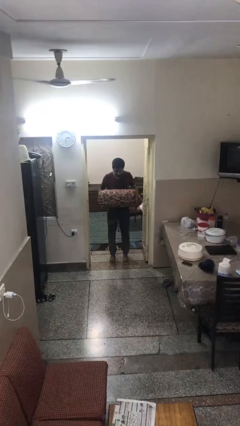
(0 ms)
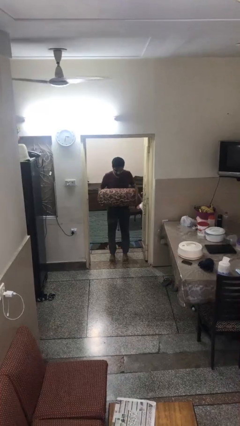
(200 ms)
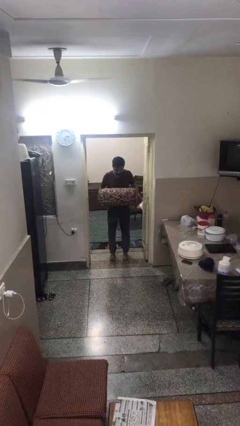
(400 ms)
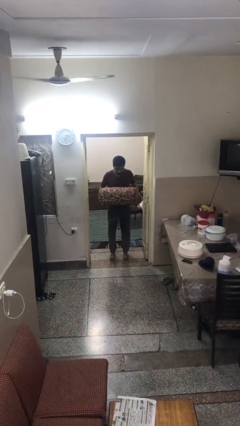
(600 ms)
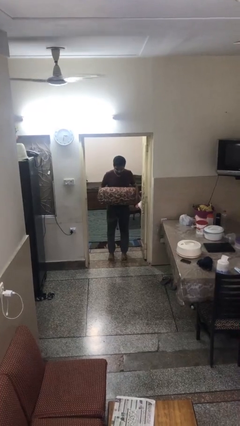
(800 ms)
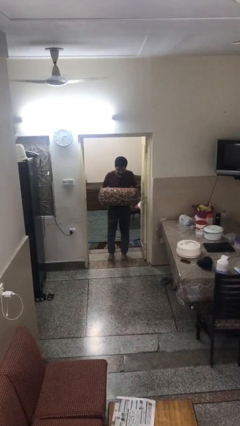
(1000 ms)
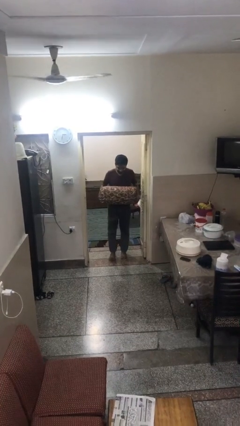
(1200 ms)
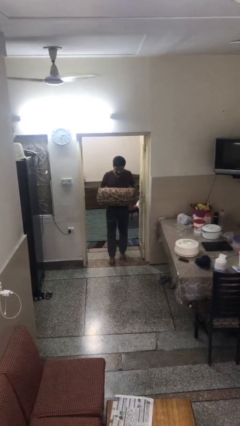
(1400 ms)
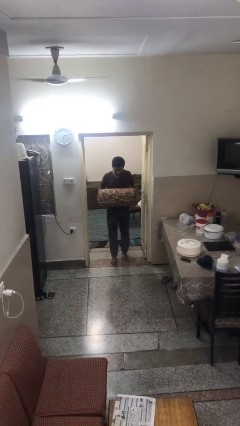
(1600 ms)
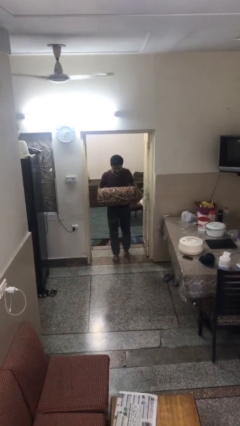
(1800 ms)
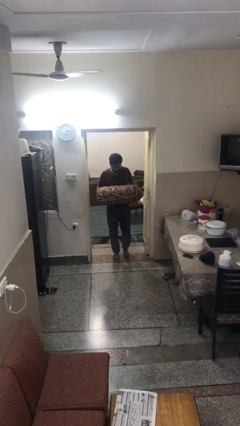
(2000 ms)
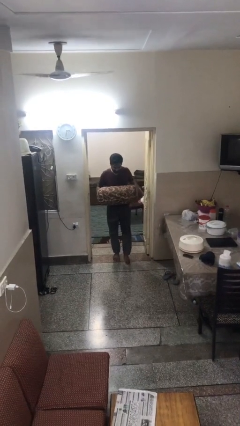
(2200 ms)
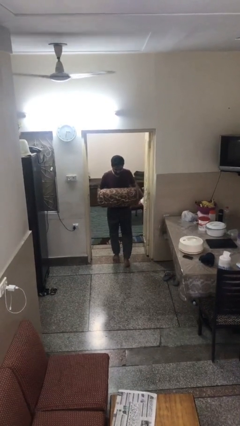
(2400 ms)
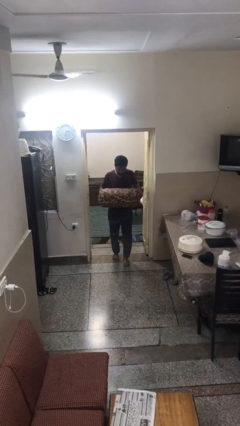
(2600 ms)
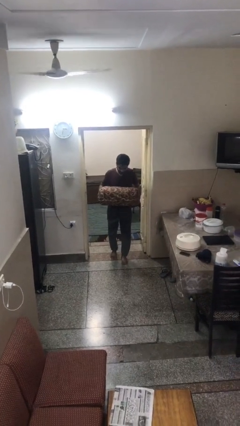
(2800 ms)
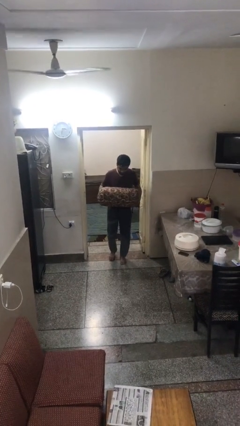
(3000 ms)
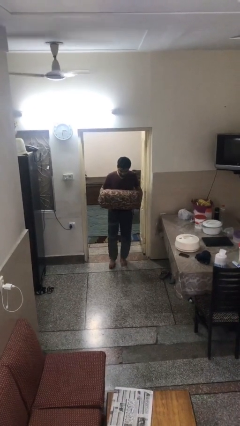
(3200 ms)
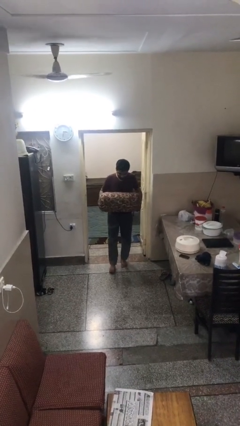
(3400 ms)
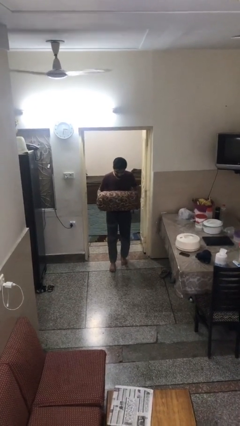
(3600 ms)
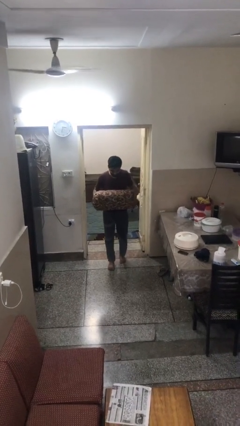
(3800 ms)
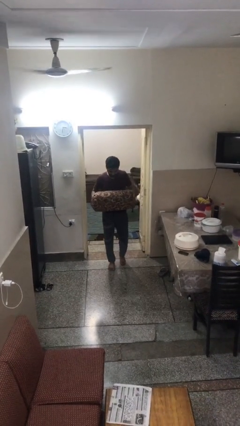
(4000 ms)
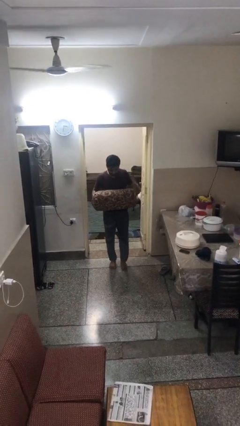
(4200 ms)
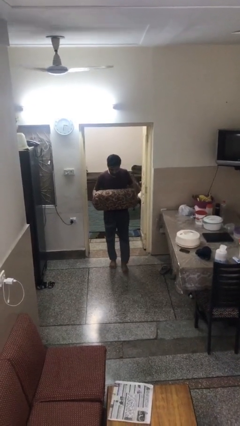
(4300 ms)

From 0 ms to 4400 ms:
person carries heavy object

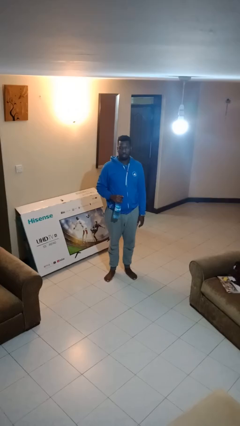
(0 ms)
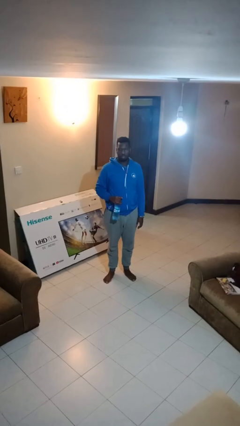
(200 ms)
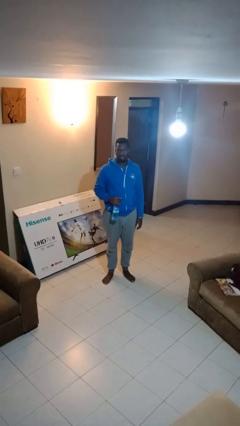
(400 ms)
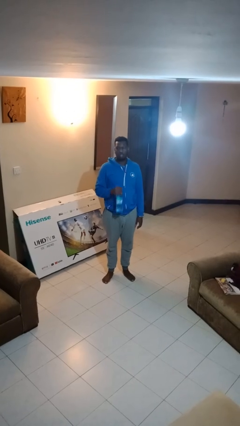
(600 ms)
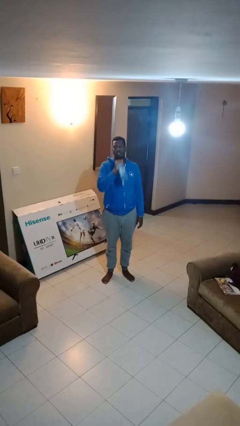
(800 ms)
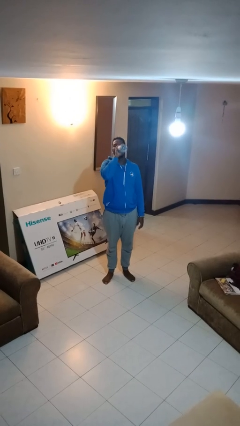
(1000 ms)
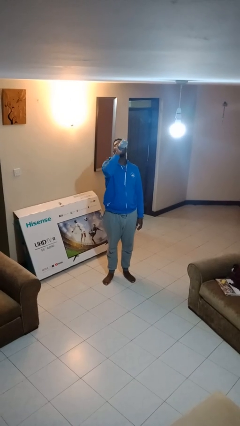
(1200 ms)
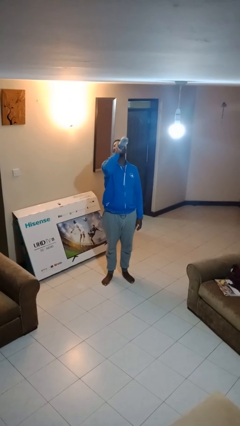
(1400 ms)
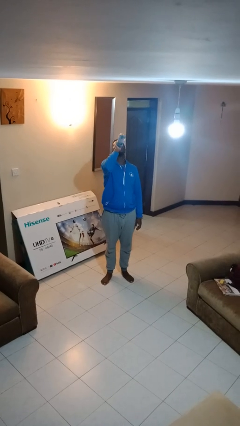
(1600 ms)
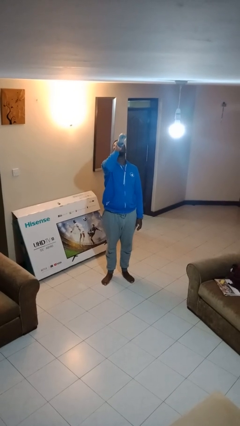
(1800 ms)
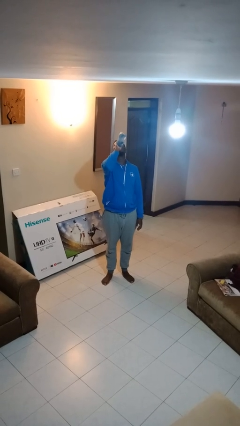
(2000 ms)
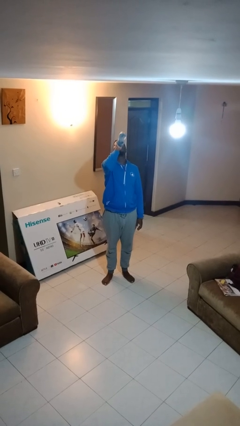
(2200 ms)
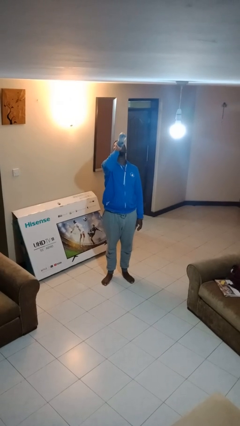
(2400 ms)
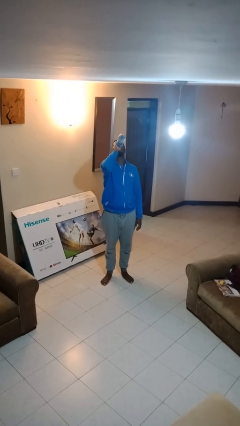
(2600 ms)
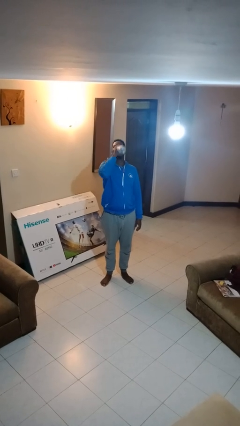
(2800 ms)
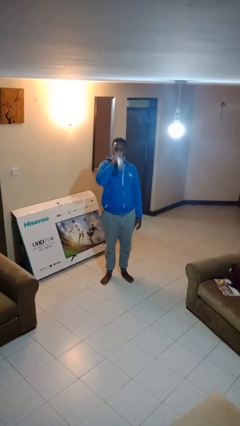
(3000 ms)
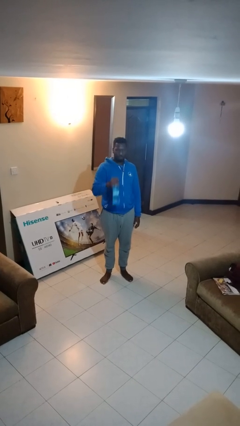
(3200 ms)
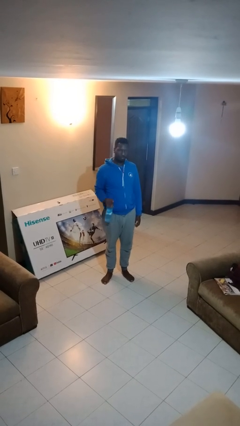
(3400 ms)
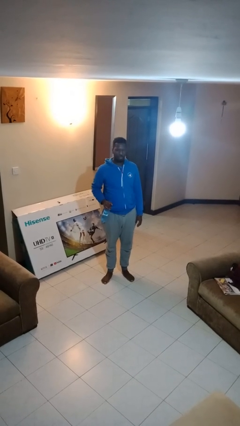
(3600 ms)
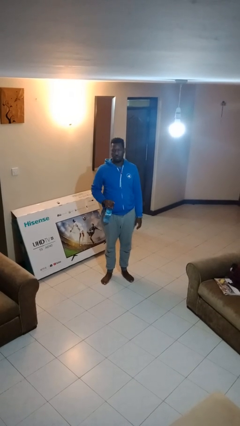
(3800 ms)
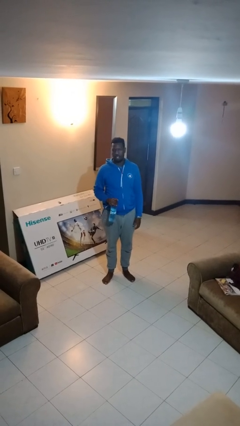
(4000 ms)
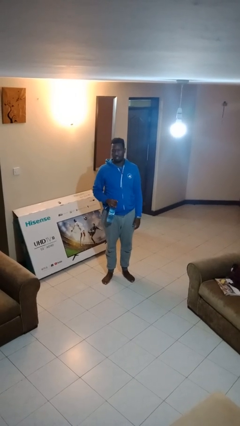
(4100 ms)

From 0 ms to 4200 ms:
person drinks from bottle

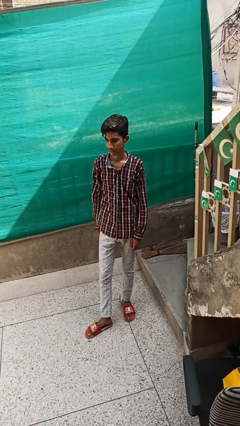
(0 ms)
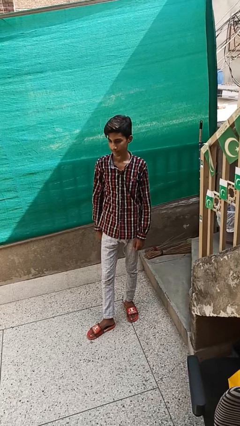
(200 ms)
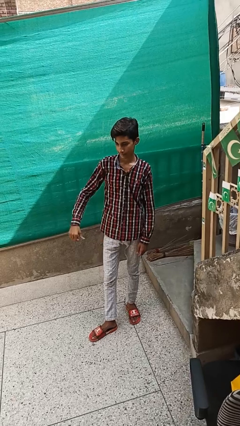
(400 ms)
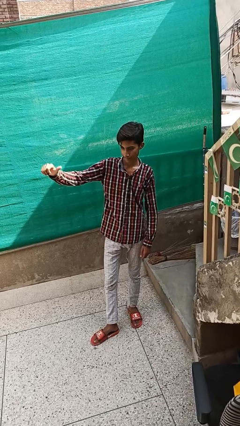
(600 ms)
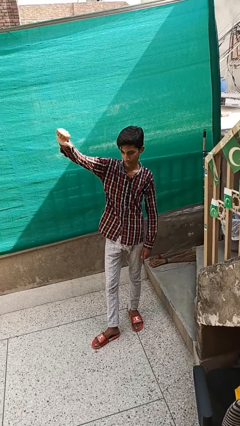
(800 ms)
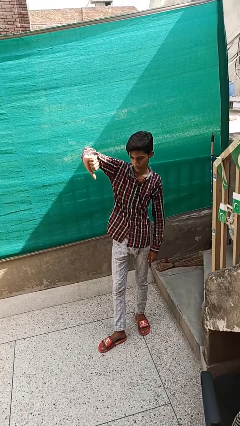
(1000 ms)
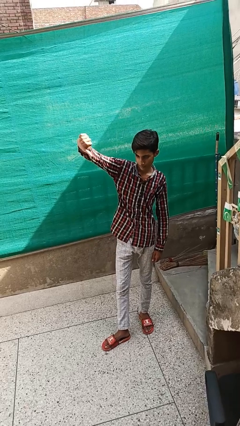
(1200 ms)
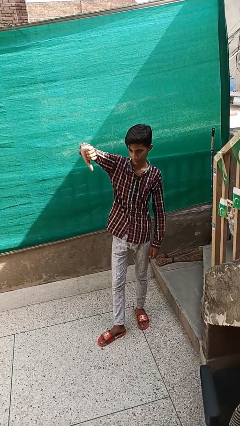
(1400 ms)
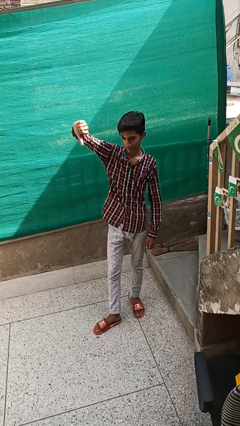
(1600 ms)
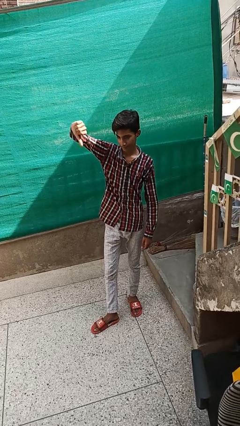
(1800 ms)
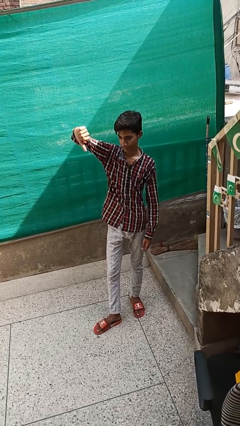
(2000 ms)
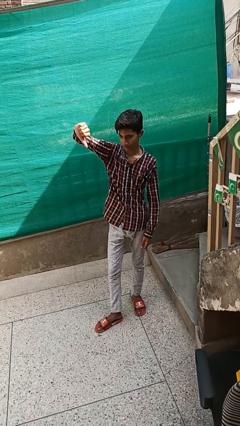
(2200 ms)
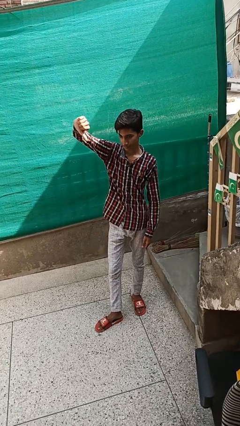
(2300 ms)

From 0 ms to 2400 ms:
person gestures thumbs down

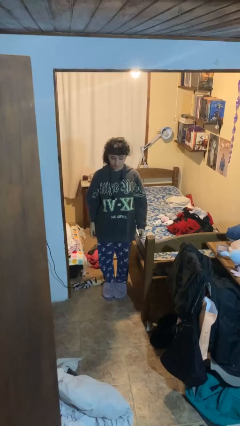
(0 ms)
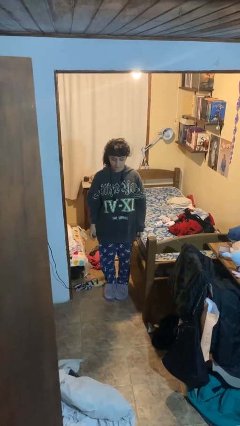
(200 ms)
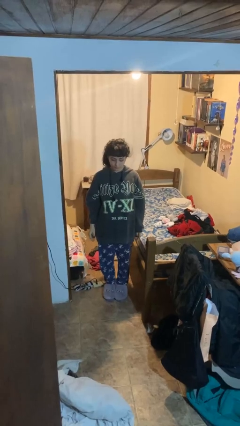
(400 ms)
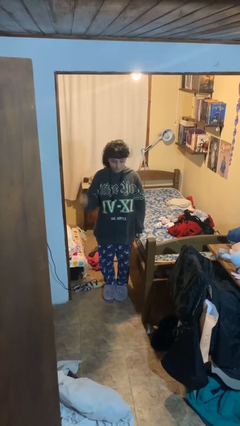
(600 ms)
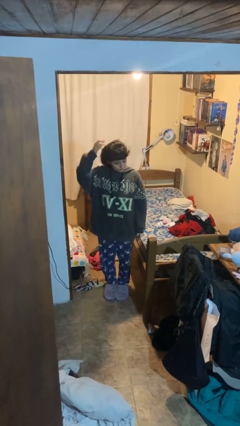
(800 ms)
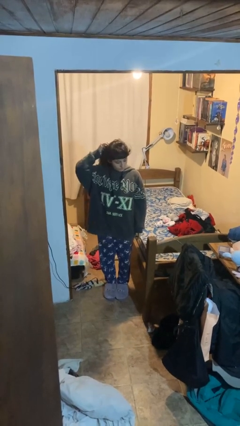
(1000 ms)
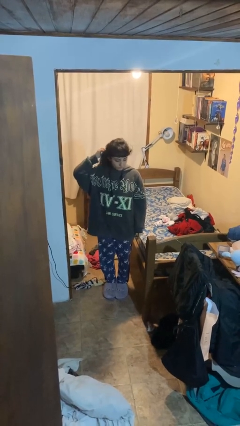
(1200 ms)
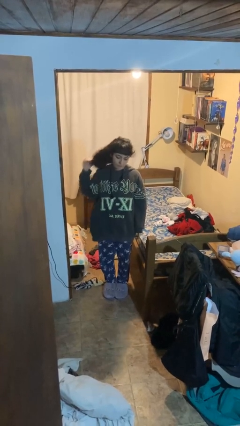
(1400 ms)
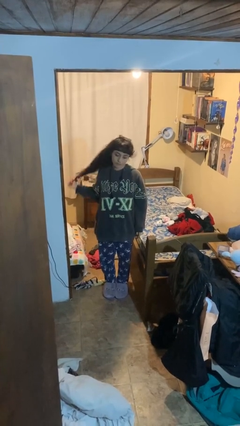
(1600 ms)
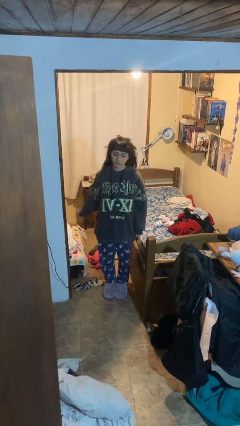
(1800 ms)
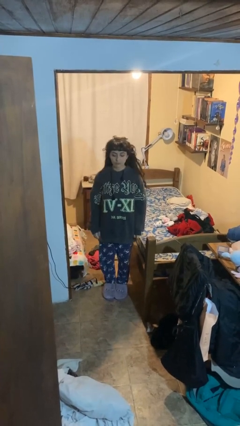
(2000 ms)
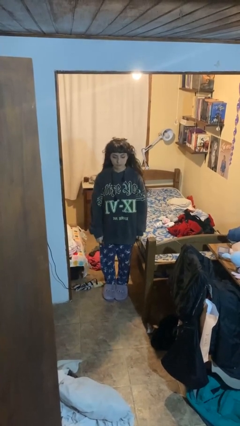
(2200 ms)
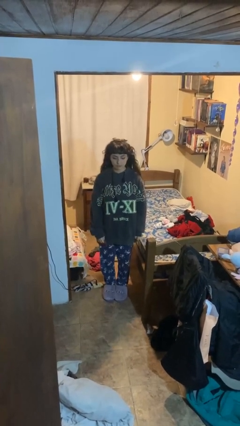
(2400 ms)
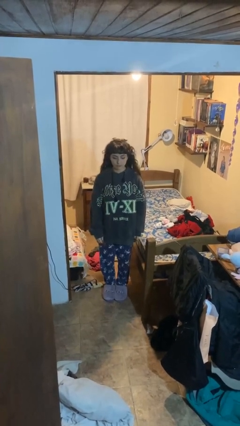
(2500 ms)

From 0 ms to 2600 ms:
person takes off hairtie

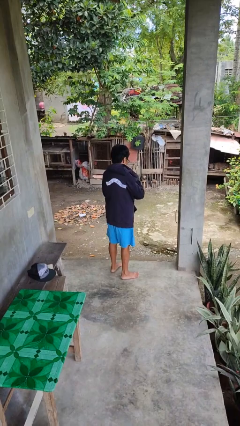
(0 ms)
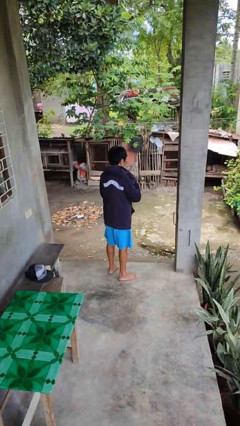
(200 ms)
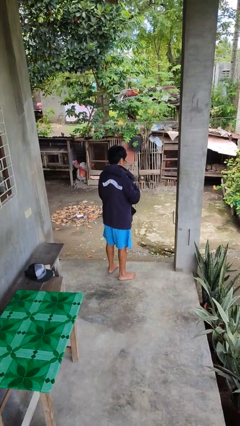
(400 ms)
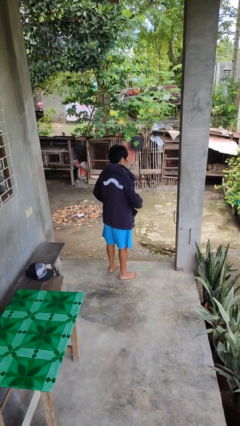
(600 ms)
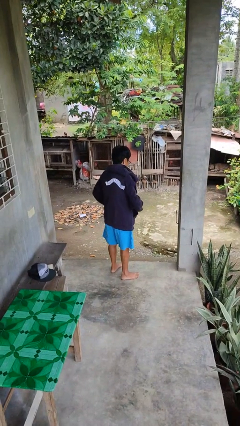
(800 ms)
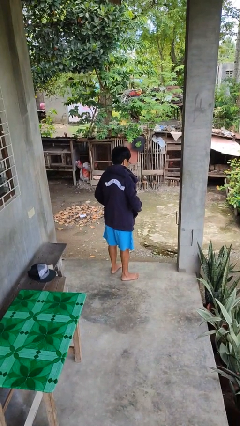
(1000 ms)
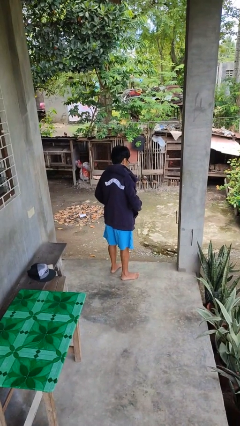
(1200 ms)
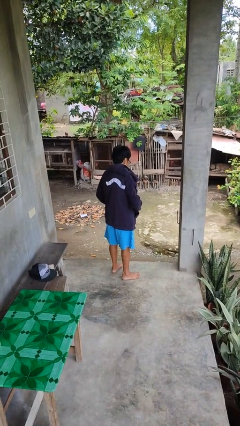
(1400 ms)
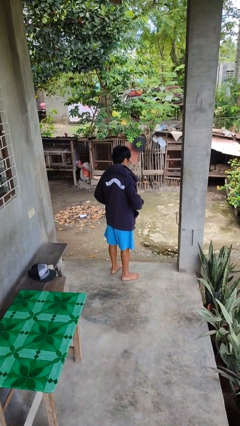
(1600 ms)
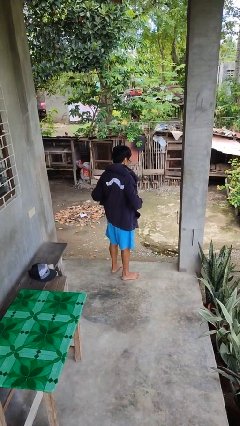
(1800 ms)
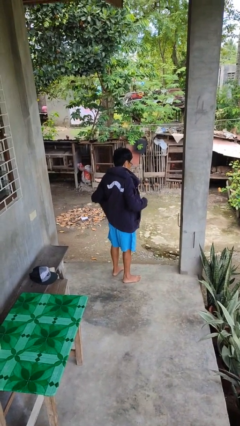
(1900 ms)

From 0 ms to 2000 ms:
person unzips jacket

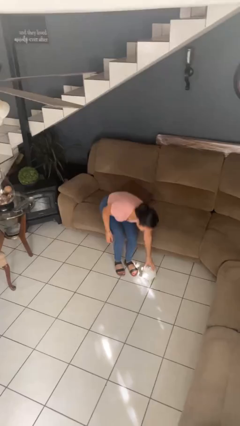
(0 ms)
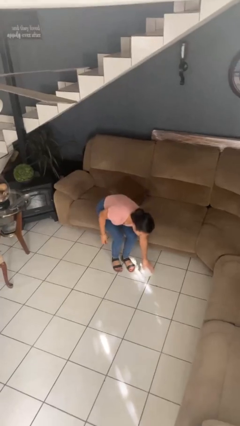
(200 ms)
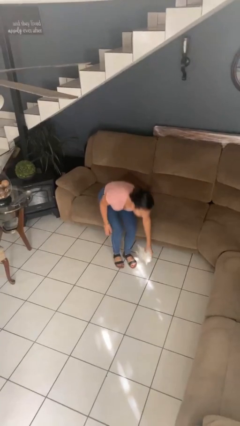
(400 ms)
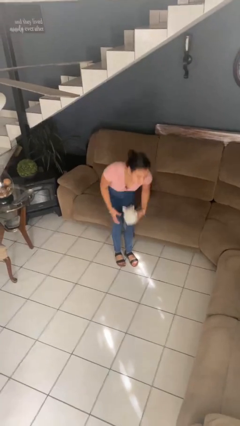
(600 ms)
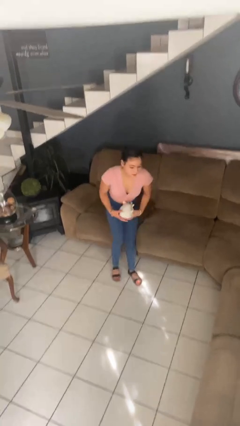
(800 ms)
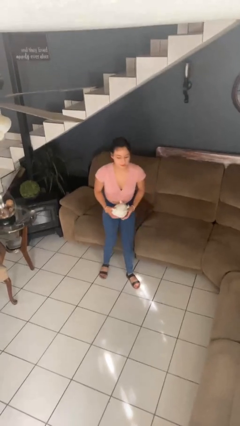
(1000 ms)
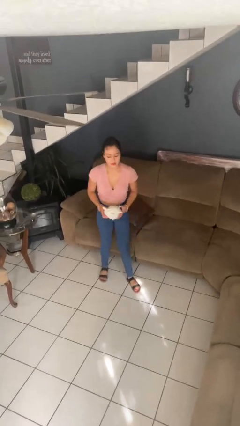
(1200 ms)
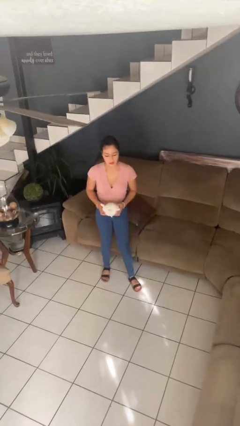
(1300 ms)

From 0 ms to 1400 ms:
person picks up object from floor

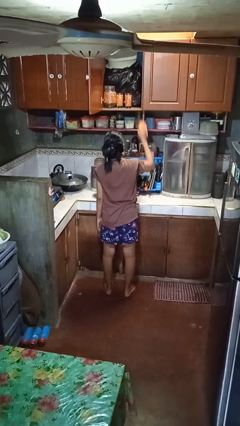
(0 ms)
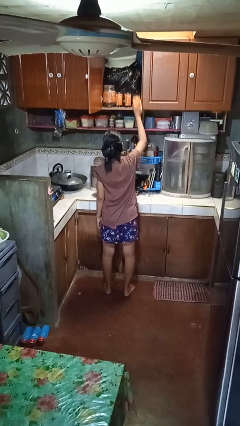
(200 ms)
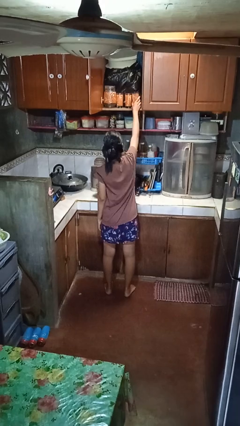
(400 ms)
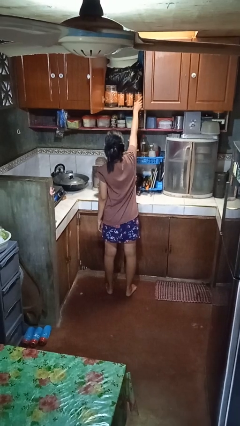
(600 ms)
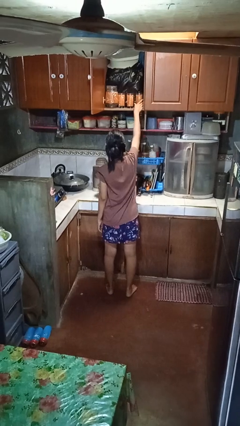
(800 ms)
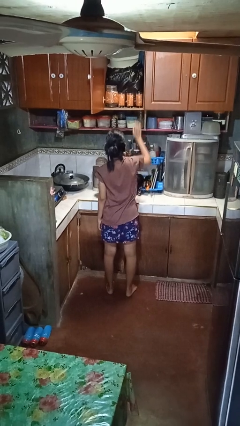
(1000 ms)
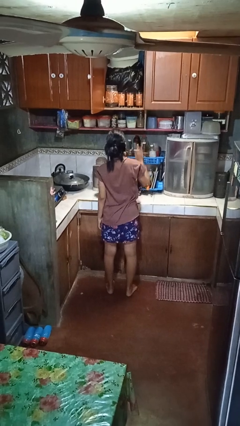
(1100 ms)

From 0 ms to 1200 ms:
person puts object in cabinet
